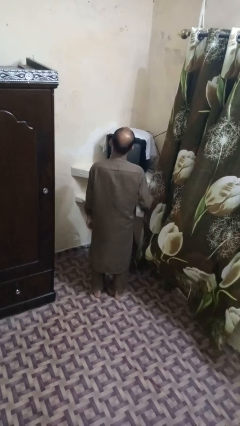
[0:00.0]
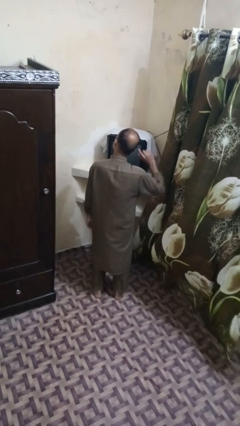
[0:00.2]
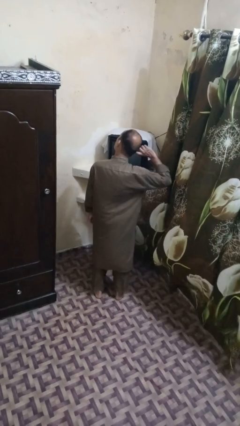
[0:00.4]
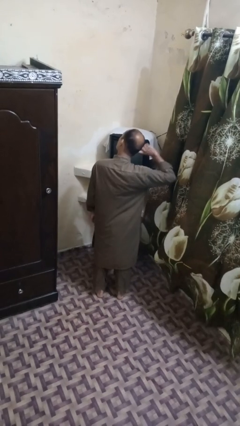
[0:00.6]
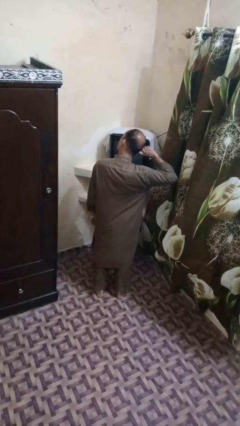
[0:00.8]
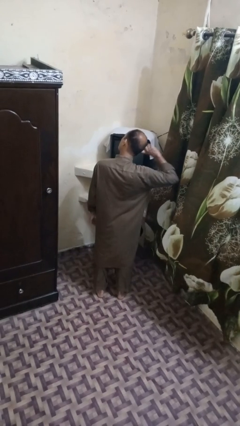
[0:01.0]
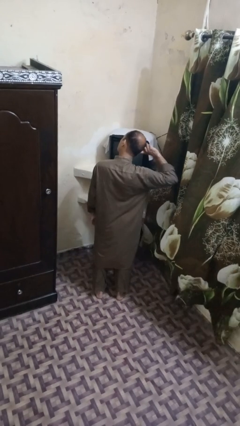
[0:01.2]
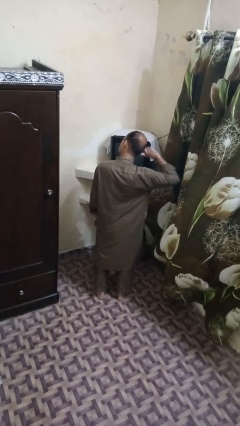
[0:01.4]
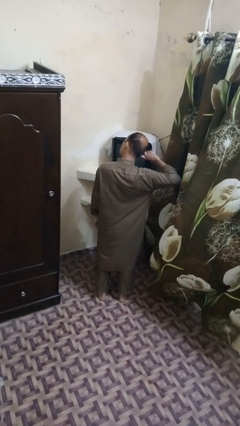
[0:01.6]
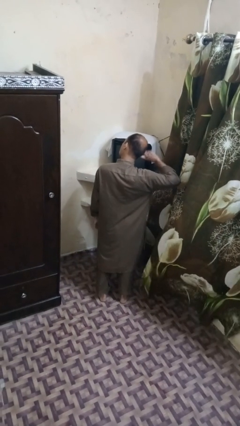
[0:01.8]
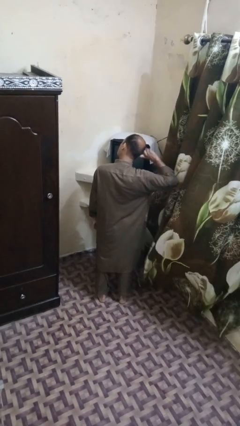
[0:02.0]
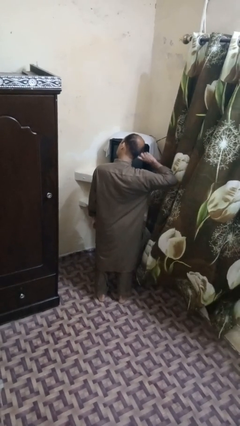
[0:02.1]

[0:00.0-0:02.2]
person puts fingers in ear

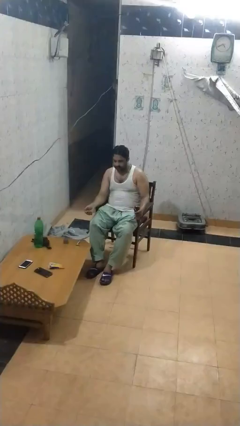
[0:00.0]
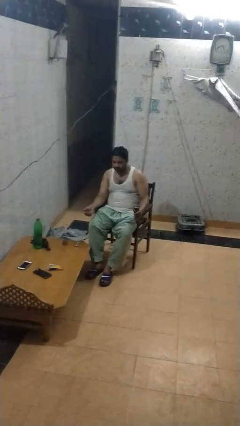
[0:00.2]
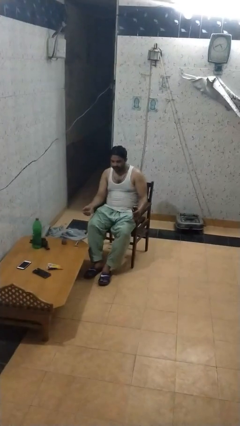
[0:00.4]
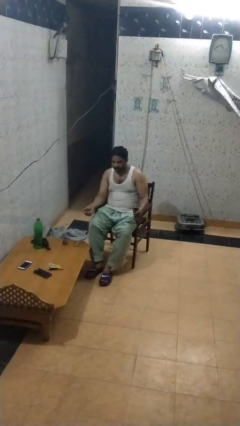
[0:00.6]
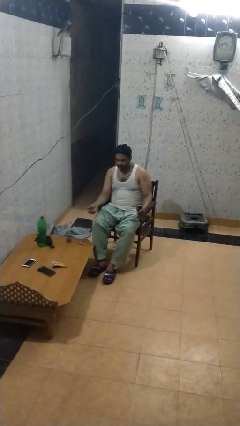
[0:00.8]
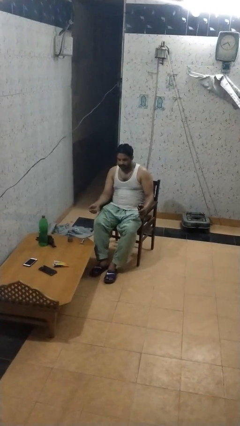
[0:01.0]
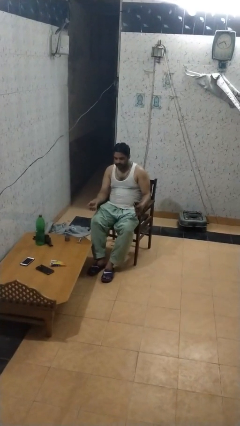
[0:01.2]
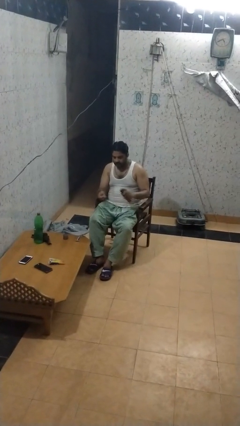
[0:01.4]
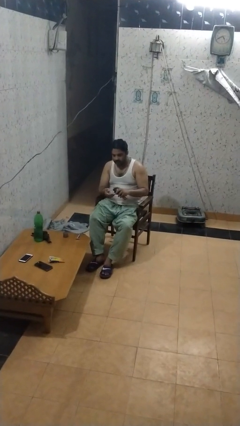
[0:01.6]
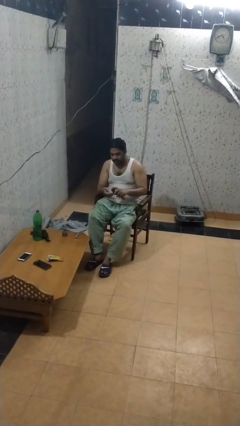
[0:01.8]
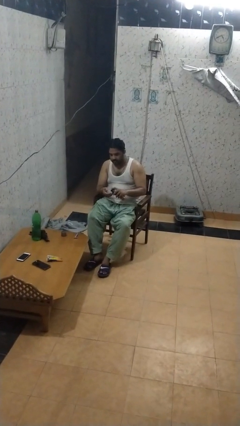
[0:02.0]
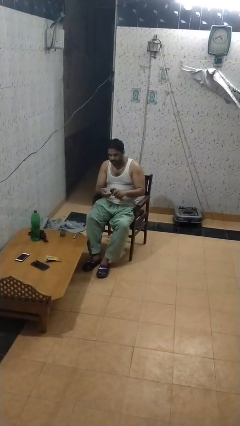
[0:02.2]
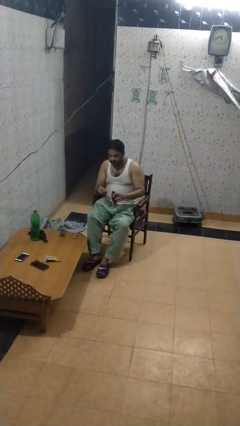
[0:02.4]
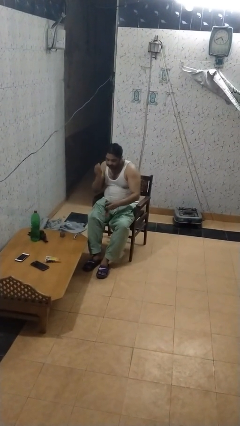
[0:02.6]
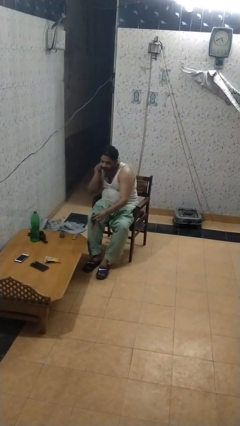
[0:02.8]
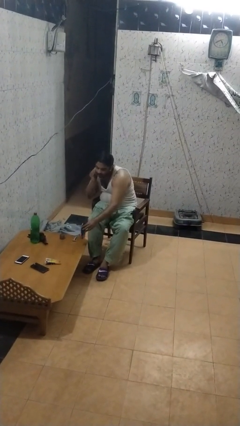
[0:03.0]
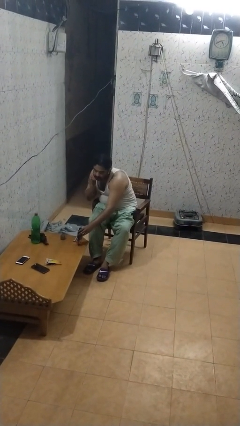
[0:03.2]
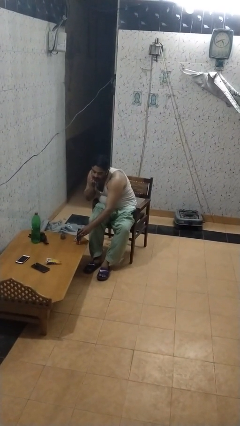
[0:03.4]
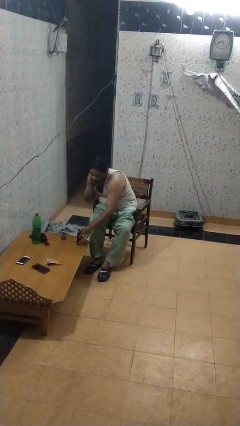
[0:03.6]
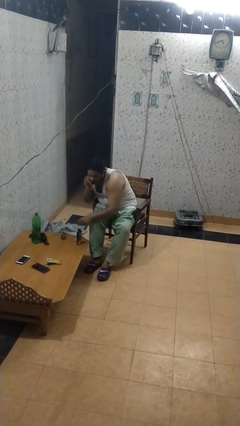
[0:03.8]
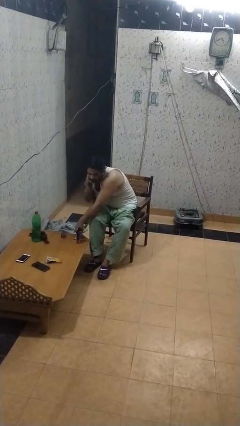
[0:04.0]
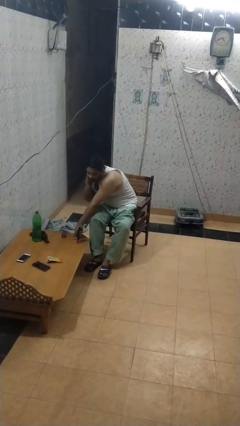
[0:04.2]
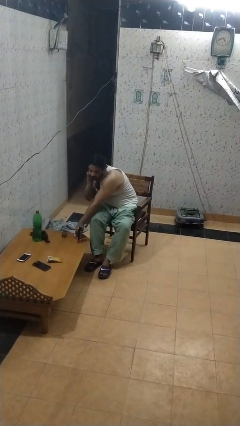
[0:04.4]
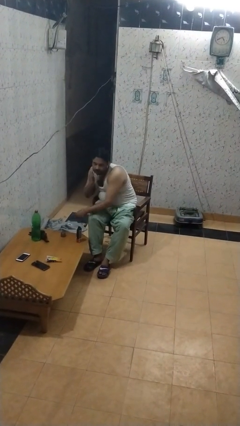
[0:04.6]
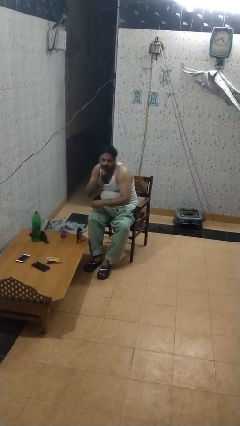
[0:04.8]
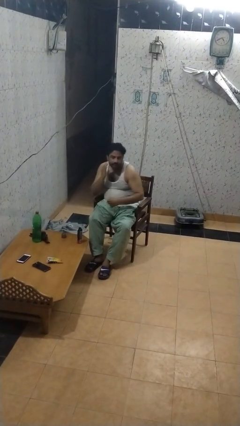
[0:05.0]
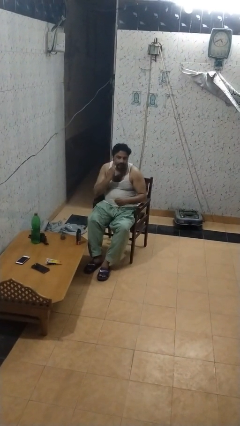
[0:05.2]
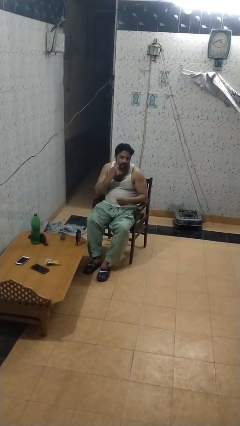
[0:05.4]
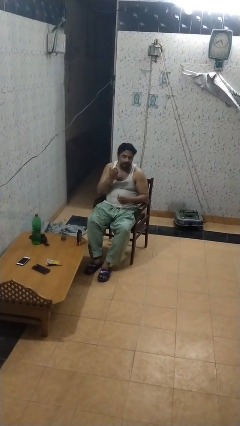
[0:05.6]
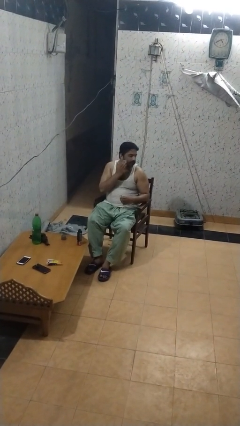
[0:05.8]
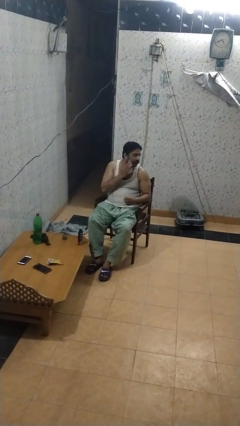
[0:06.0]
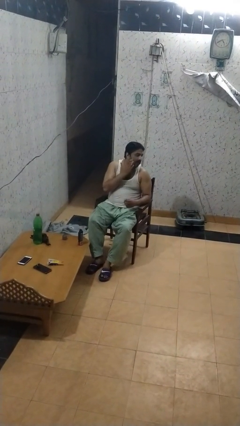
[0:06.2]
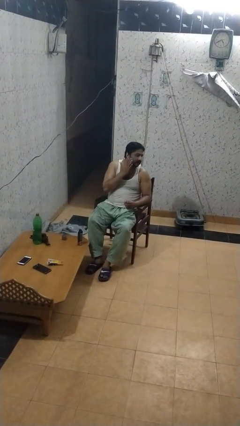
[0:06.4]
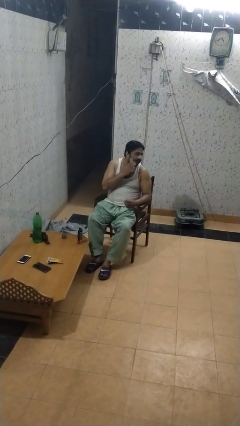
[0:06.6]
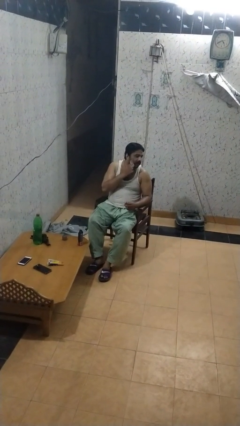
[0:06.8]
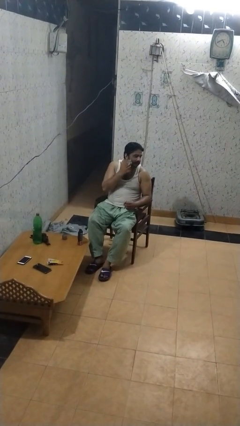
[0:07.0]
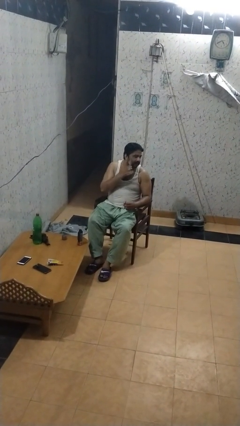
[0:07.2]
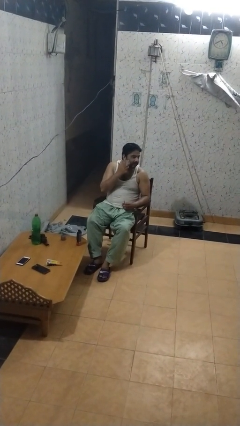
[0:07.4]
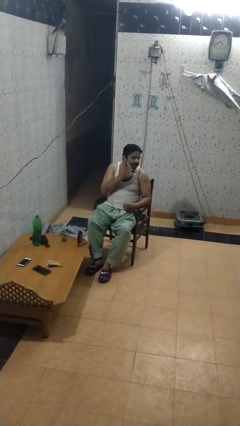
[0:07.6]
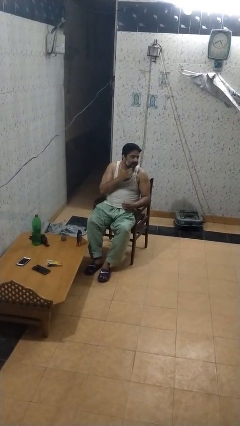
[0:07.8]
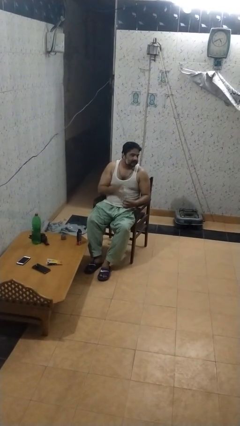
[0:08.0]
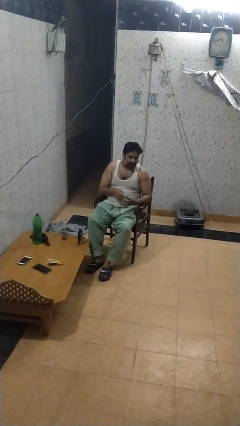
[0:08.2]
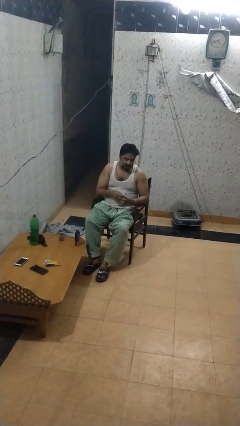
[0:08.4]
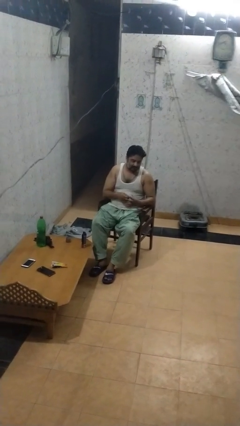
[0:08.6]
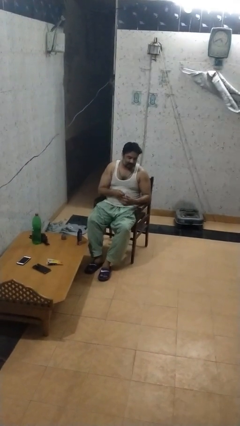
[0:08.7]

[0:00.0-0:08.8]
person applies shaving cream

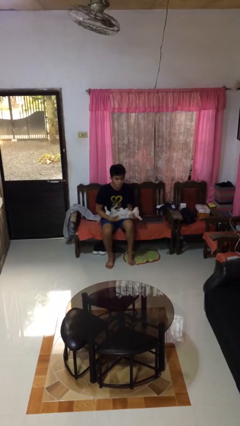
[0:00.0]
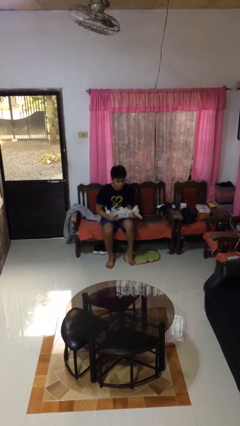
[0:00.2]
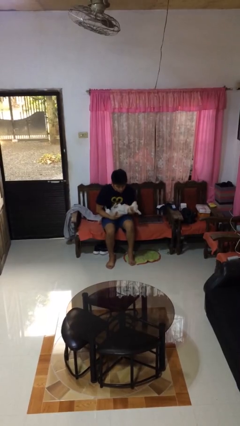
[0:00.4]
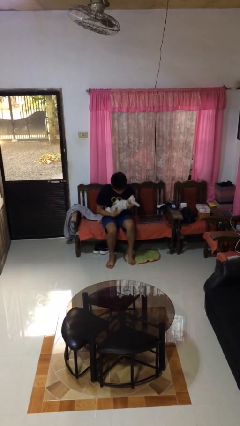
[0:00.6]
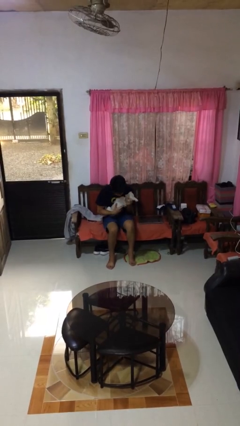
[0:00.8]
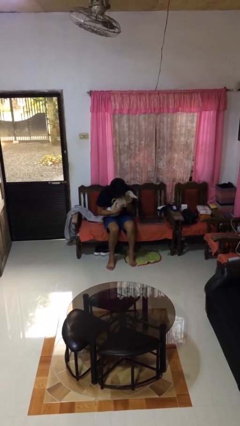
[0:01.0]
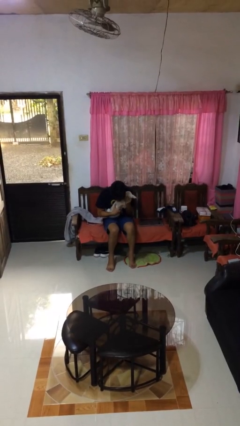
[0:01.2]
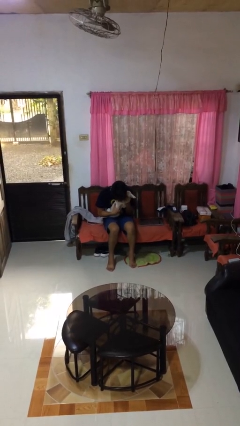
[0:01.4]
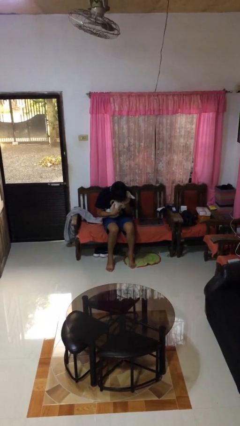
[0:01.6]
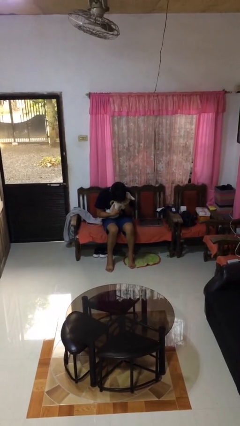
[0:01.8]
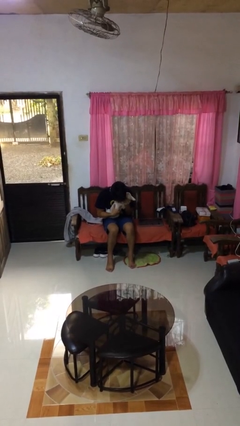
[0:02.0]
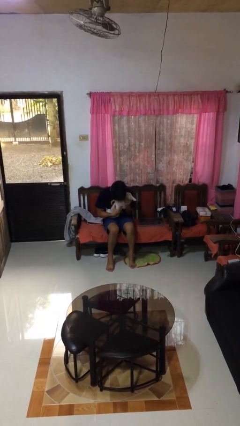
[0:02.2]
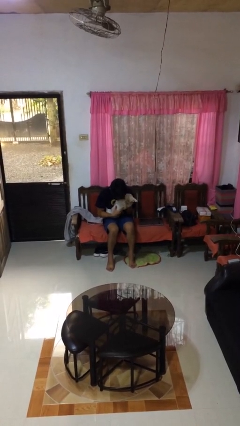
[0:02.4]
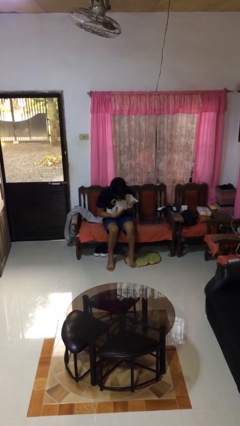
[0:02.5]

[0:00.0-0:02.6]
person hugs dog

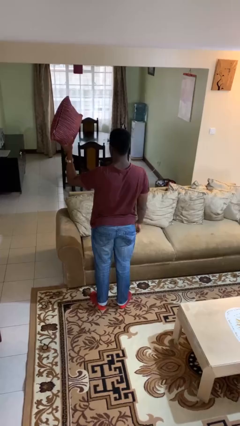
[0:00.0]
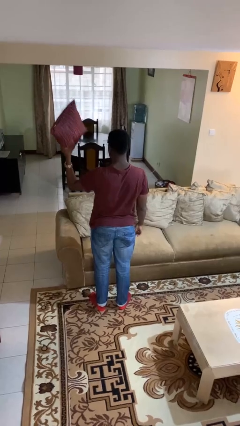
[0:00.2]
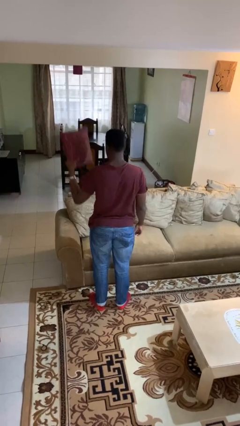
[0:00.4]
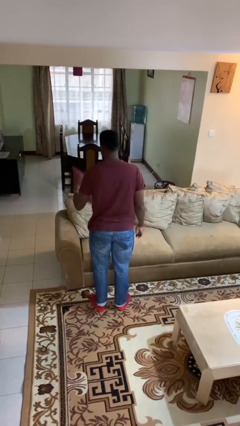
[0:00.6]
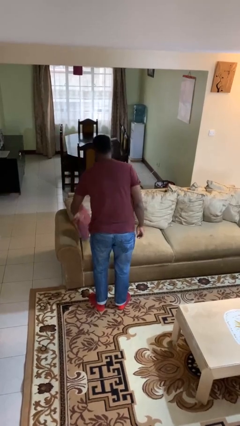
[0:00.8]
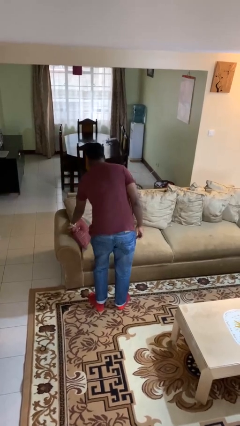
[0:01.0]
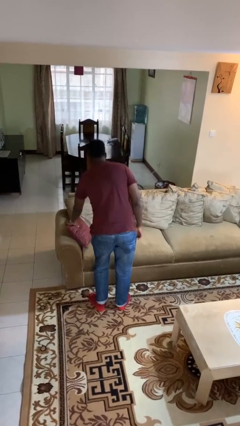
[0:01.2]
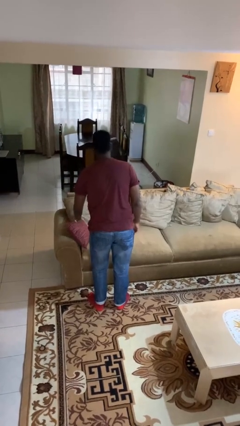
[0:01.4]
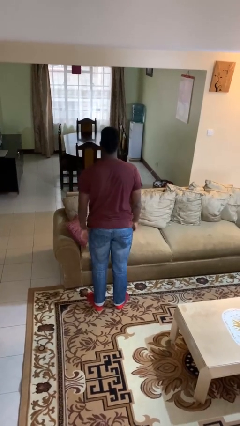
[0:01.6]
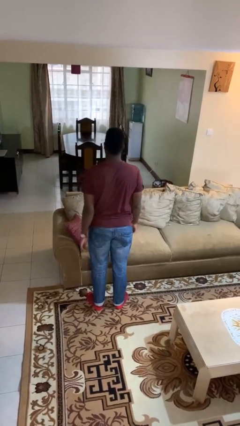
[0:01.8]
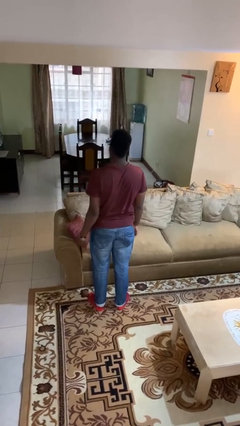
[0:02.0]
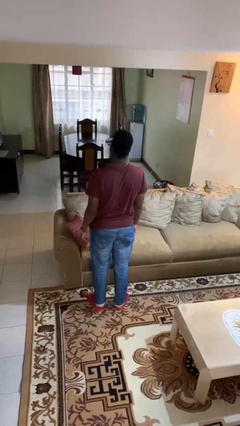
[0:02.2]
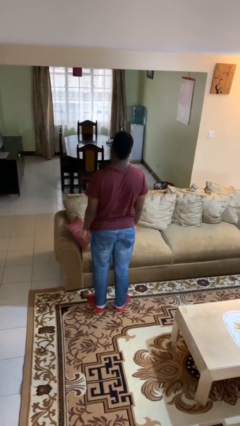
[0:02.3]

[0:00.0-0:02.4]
person puts down object on couch

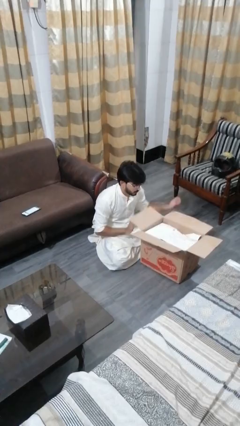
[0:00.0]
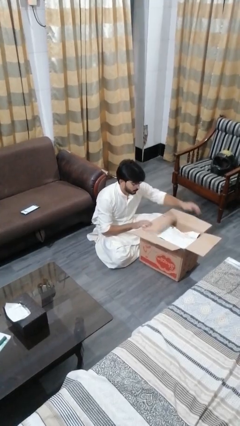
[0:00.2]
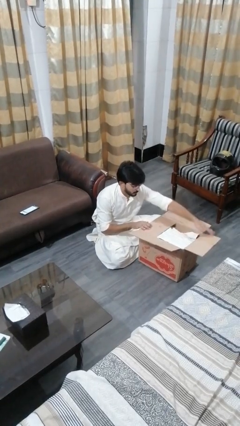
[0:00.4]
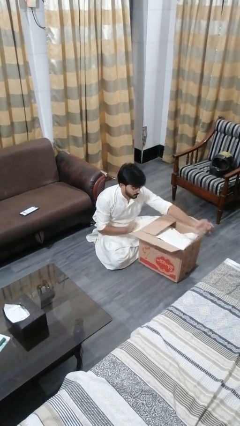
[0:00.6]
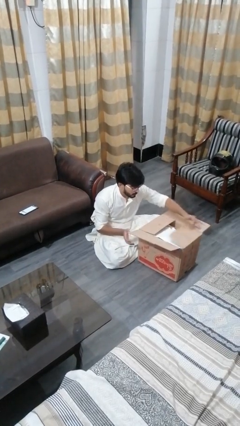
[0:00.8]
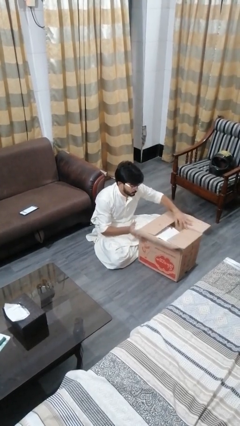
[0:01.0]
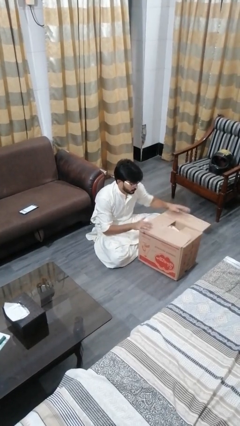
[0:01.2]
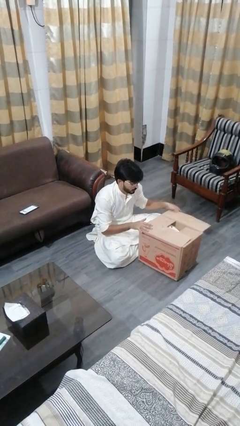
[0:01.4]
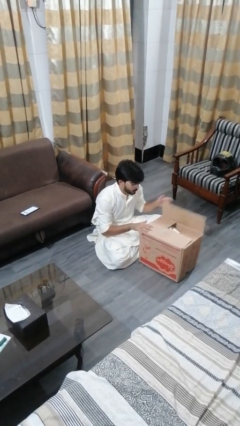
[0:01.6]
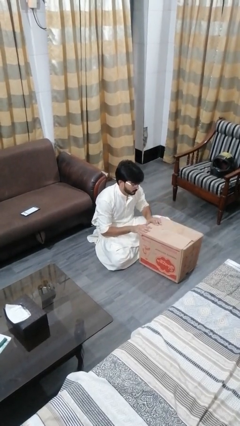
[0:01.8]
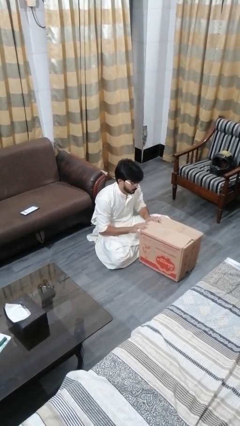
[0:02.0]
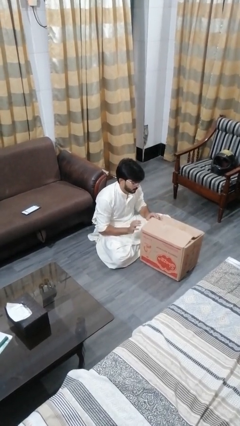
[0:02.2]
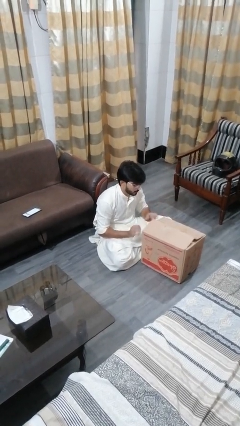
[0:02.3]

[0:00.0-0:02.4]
person closes box
